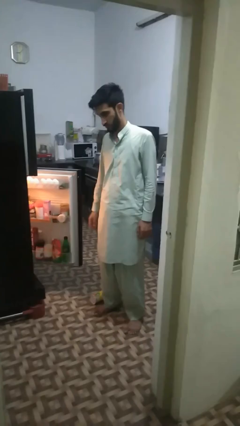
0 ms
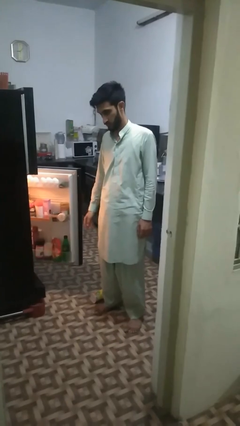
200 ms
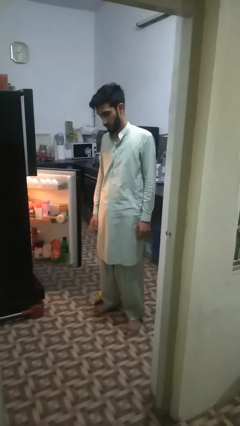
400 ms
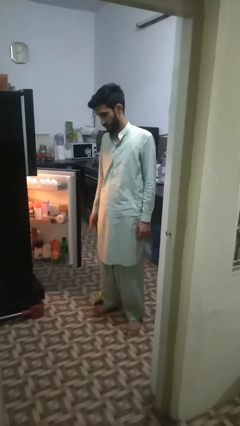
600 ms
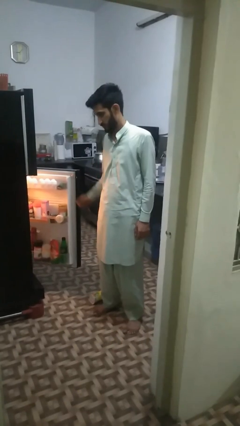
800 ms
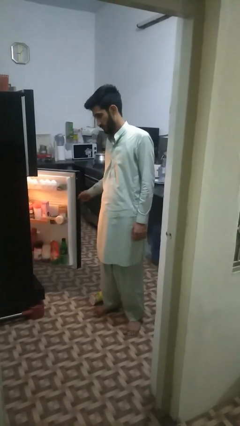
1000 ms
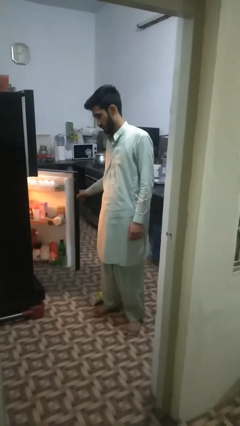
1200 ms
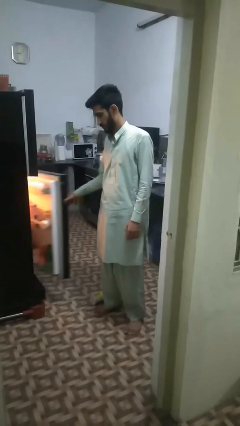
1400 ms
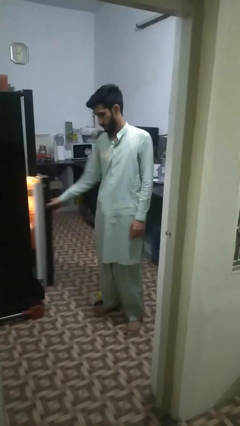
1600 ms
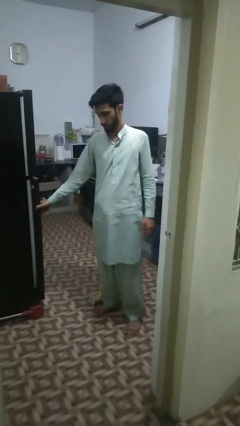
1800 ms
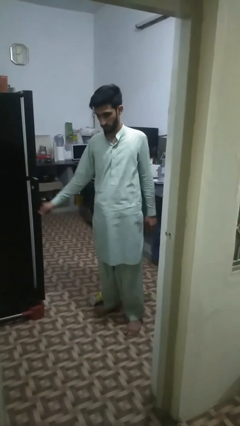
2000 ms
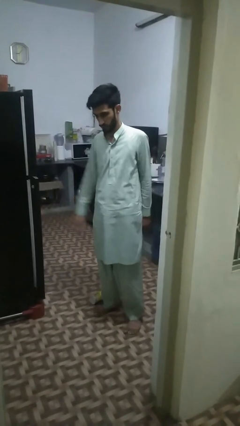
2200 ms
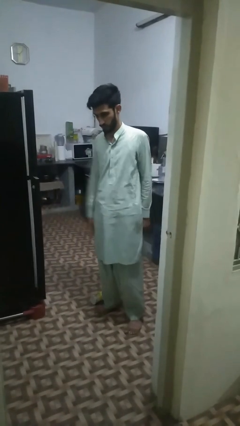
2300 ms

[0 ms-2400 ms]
person closes refrigerator

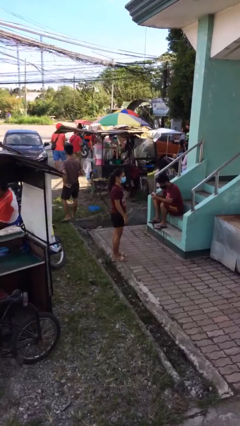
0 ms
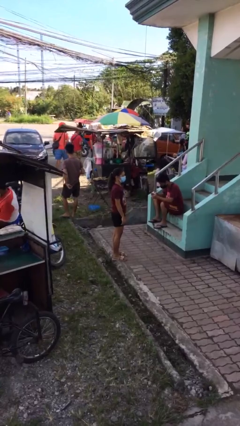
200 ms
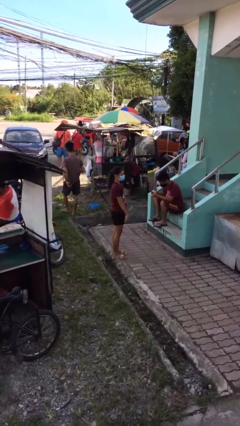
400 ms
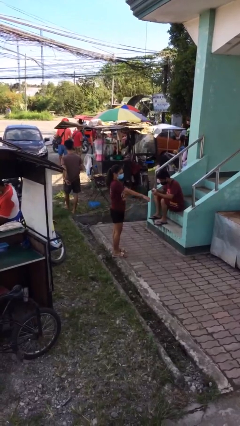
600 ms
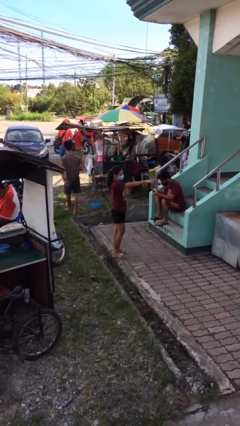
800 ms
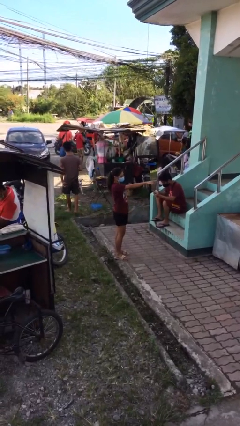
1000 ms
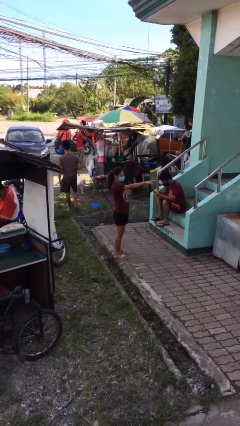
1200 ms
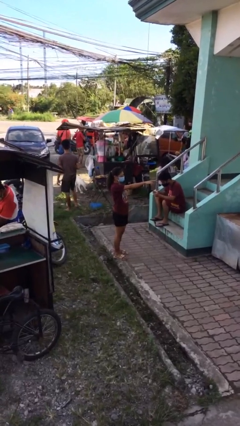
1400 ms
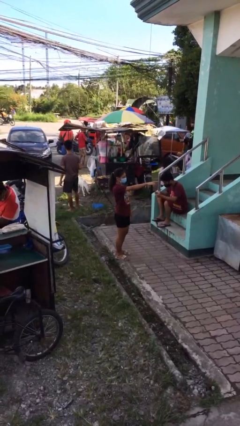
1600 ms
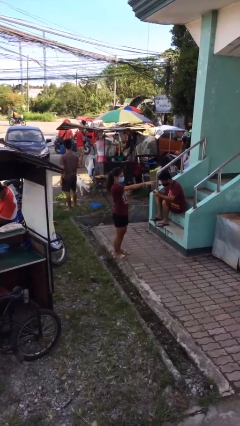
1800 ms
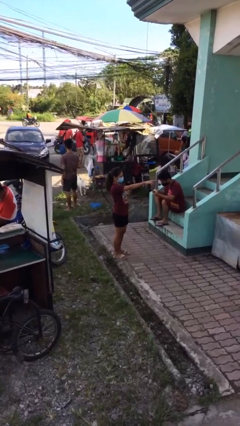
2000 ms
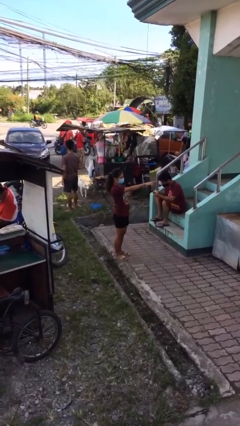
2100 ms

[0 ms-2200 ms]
person points at person

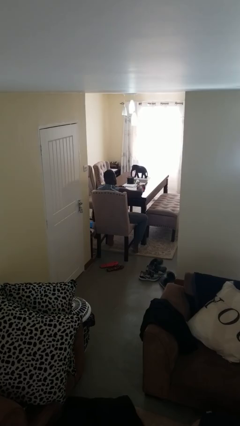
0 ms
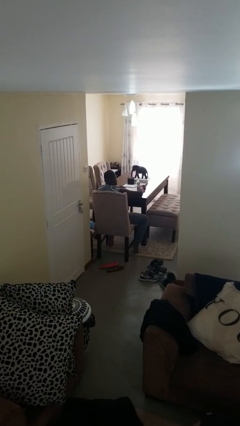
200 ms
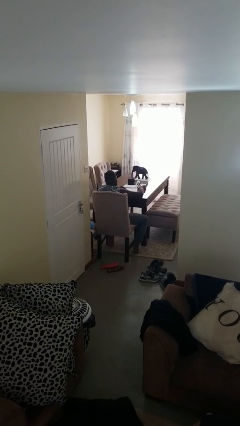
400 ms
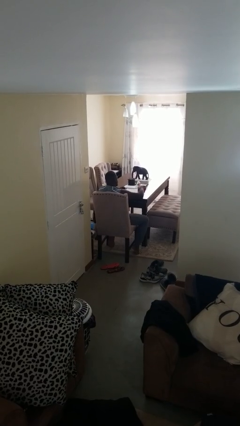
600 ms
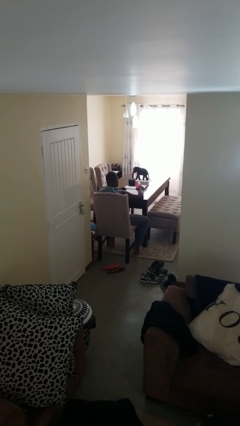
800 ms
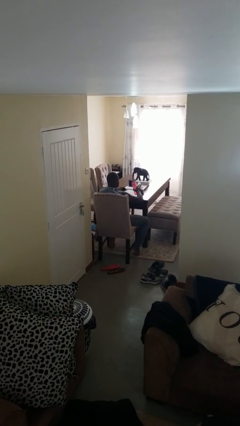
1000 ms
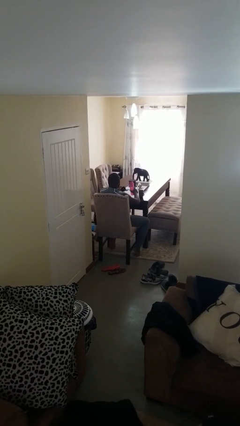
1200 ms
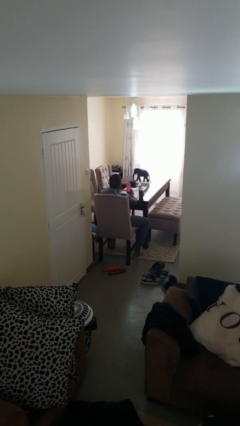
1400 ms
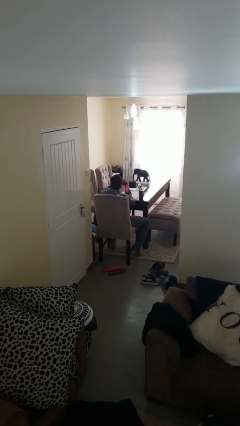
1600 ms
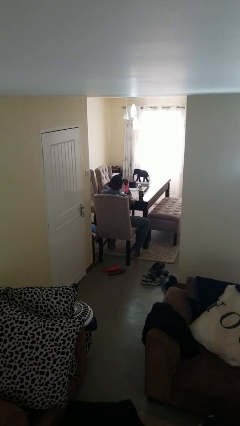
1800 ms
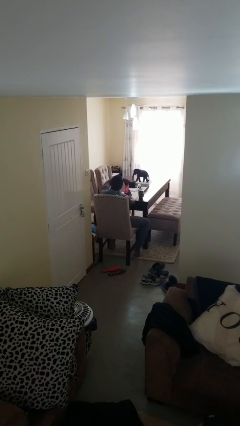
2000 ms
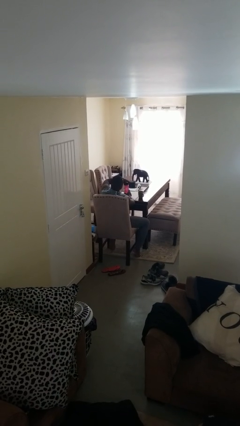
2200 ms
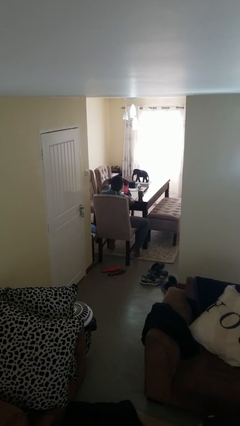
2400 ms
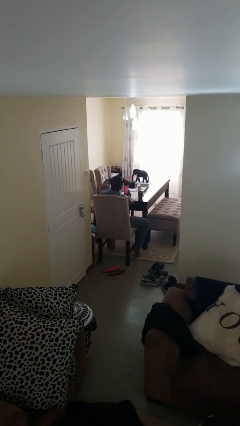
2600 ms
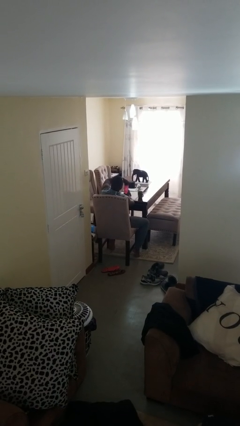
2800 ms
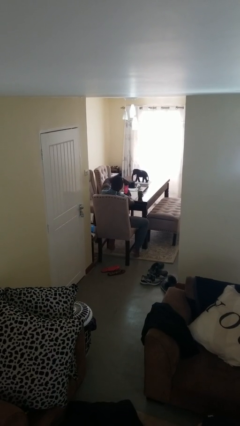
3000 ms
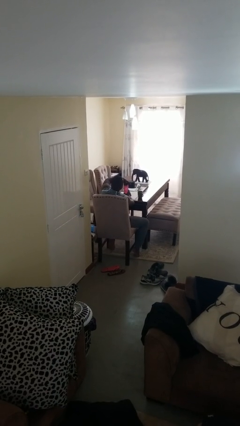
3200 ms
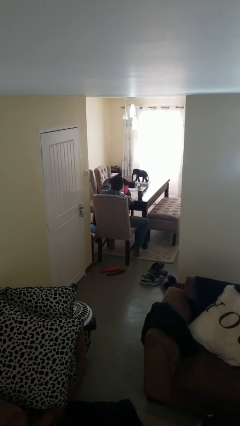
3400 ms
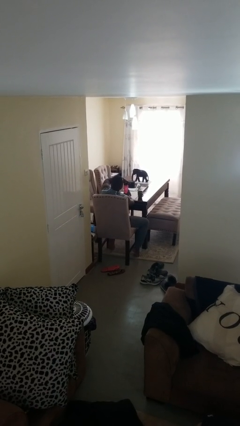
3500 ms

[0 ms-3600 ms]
person screws lid to bottle

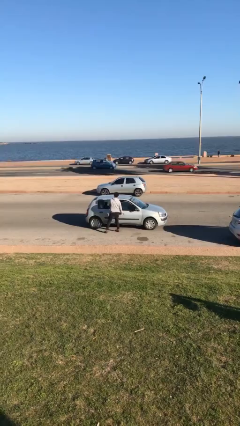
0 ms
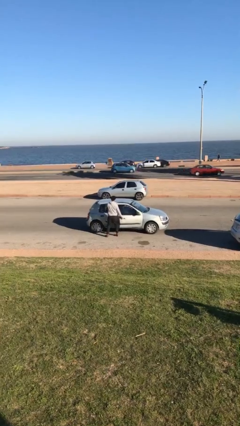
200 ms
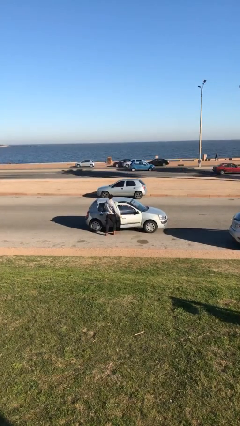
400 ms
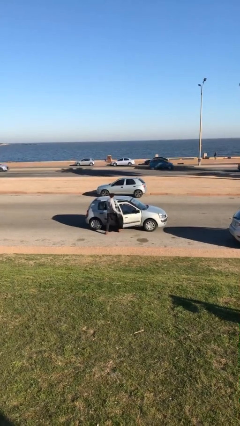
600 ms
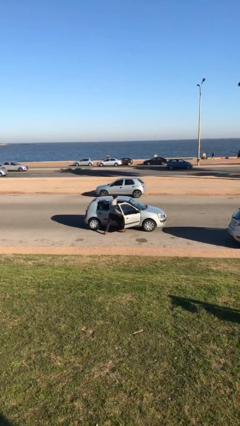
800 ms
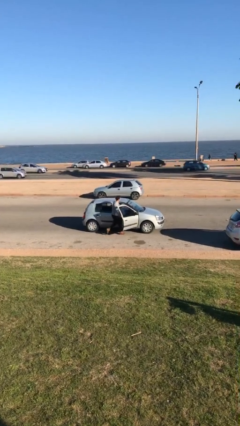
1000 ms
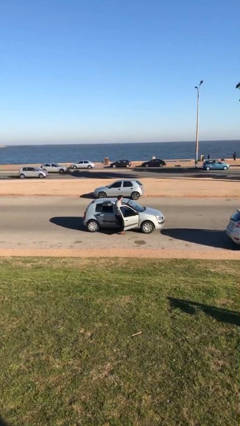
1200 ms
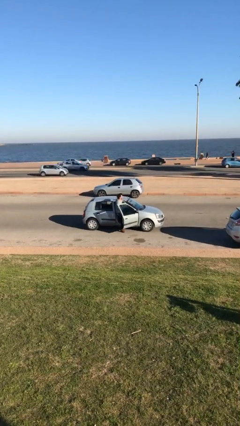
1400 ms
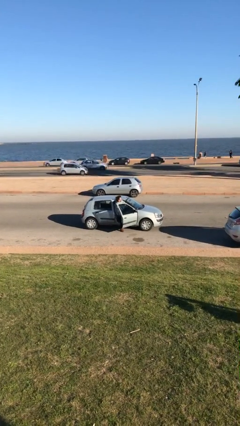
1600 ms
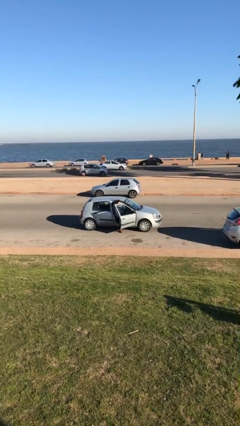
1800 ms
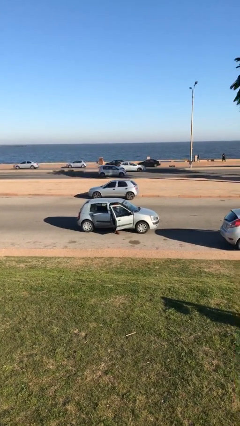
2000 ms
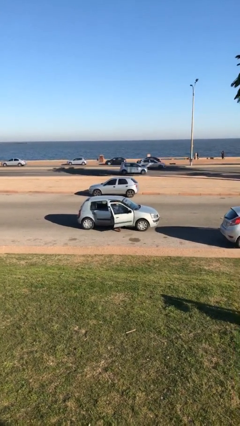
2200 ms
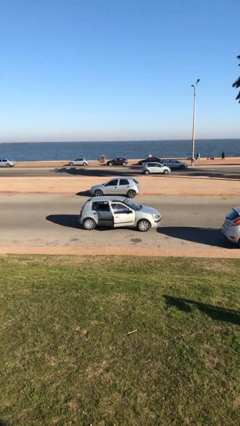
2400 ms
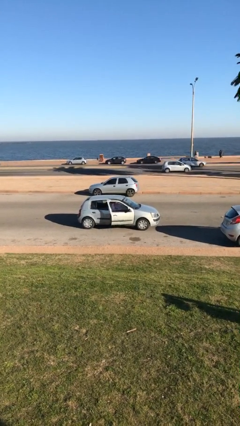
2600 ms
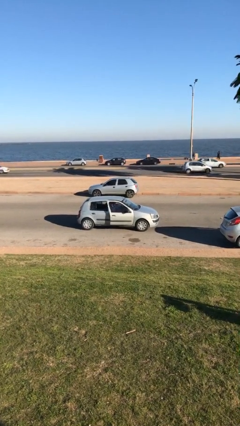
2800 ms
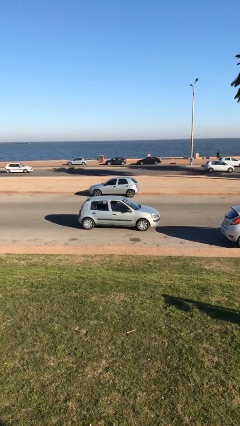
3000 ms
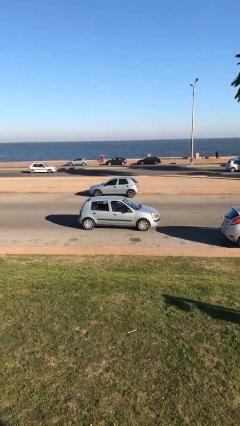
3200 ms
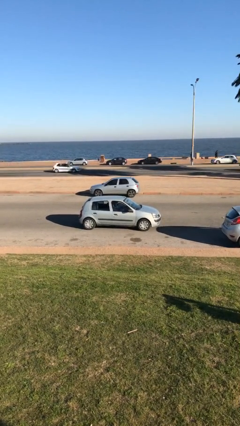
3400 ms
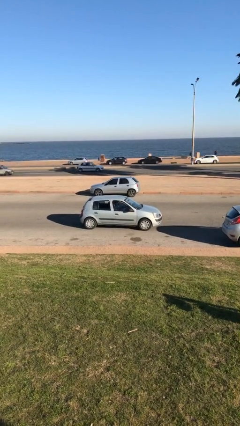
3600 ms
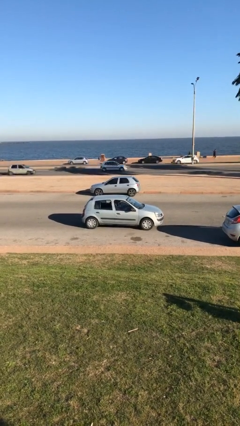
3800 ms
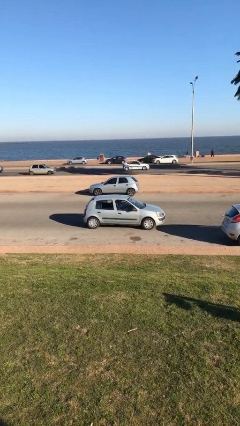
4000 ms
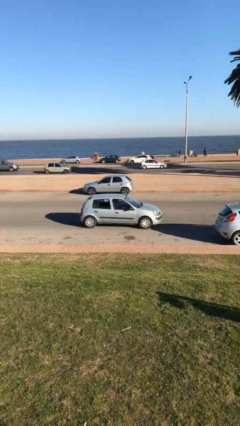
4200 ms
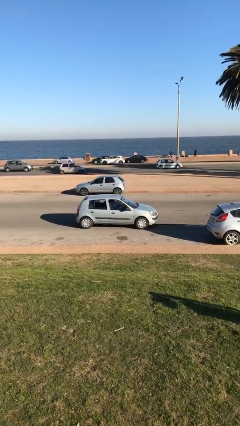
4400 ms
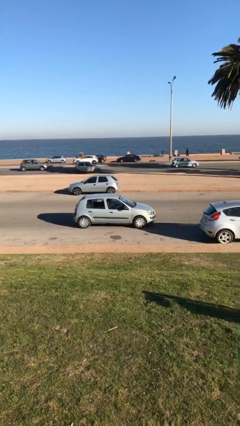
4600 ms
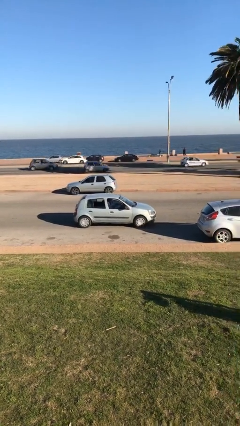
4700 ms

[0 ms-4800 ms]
car picks up person

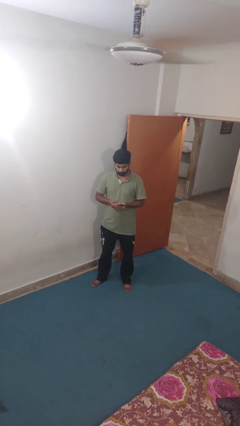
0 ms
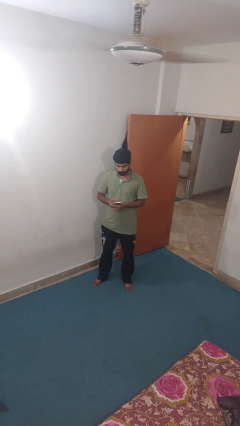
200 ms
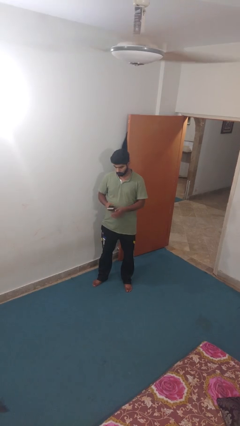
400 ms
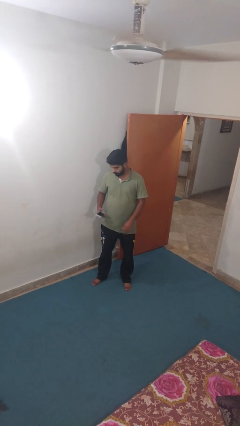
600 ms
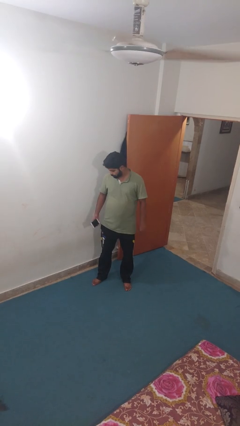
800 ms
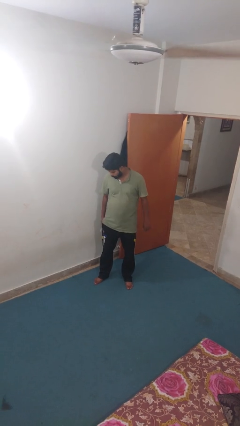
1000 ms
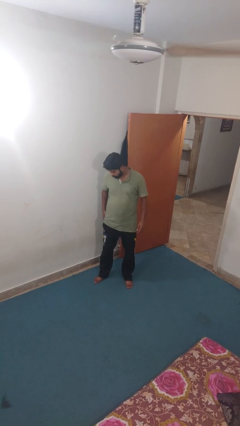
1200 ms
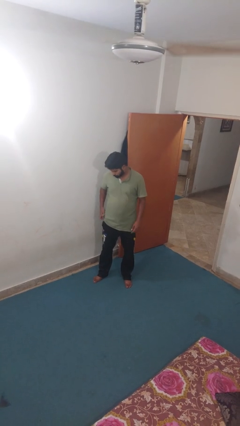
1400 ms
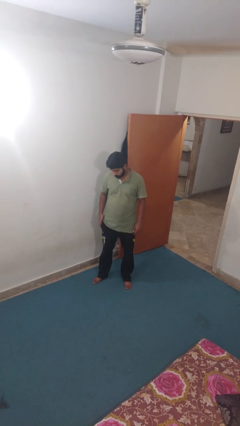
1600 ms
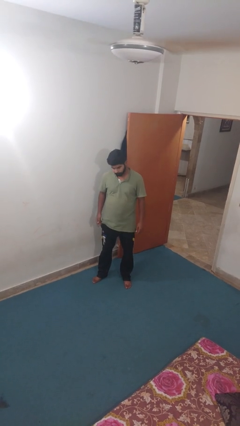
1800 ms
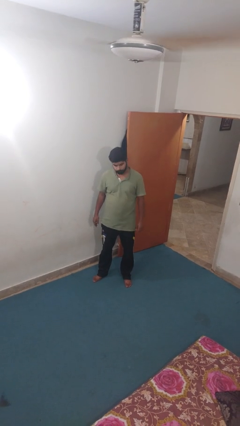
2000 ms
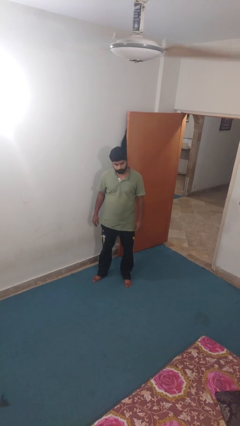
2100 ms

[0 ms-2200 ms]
person puts phone into pocket

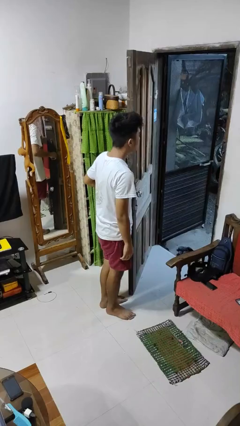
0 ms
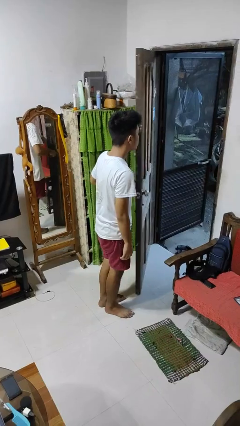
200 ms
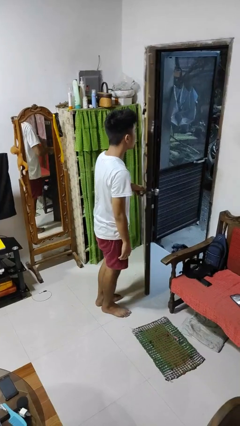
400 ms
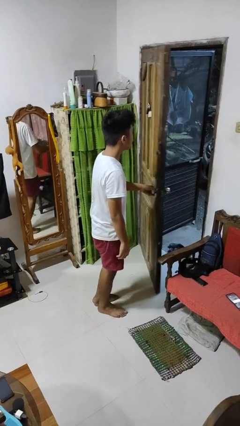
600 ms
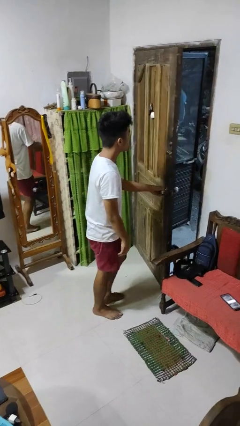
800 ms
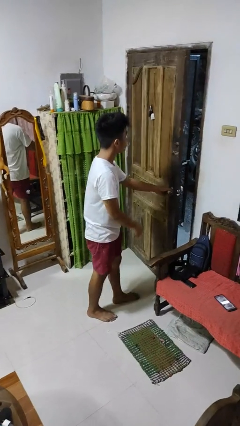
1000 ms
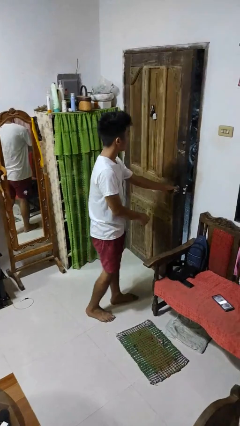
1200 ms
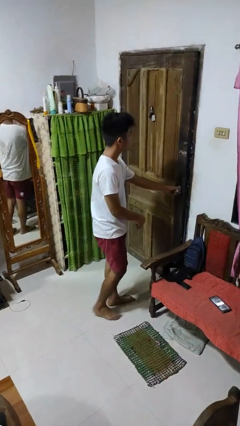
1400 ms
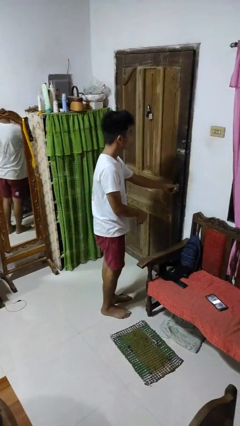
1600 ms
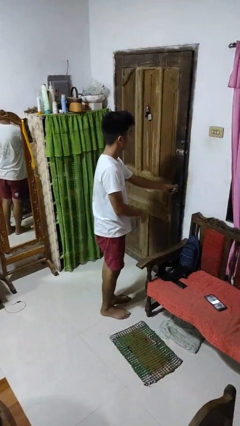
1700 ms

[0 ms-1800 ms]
person closes facility door

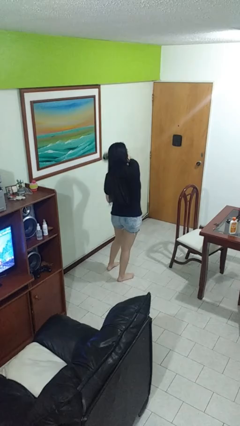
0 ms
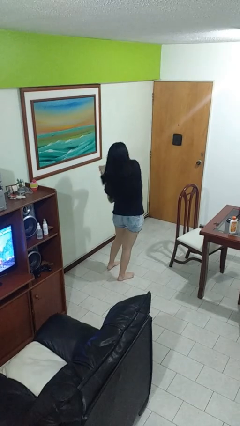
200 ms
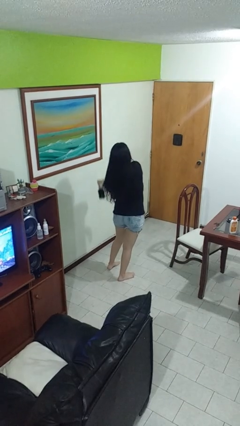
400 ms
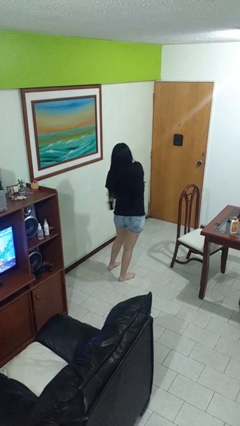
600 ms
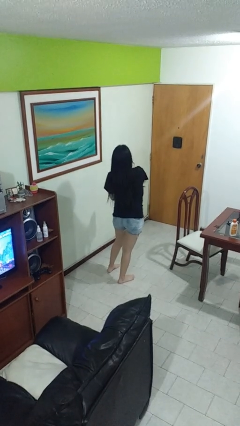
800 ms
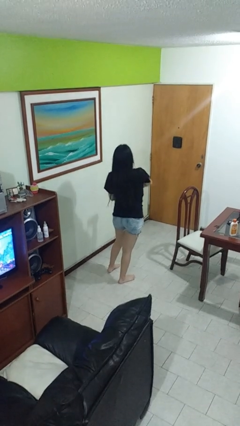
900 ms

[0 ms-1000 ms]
person brushes hair
